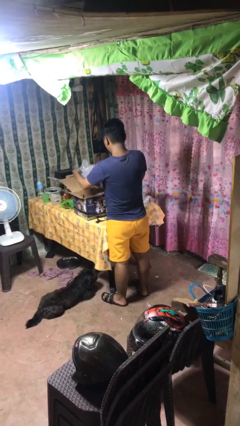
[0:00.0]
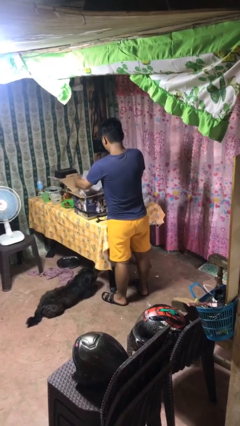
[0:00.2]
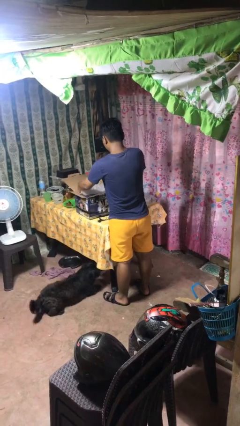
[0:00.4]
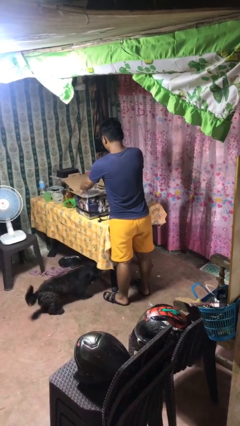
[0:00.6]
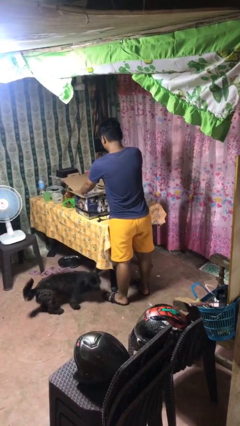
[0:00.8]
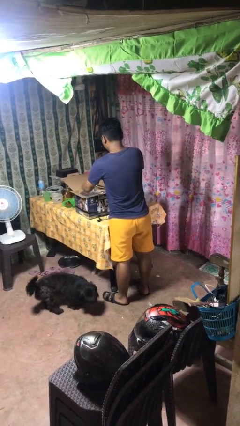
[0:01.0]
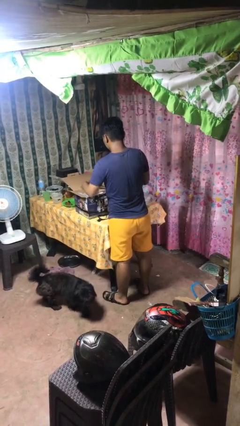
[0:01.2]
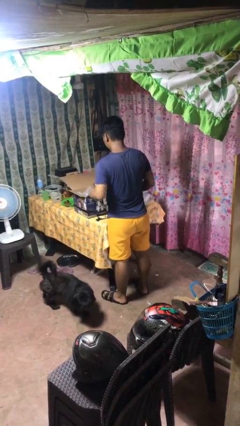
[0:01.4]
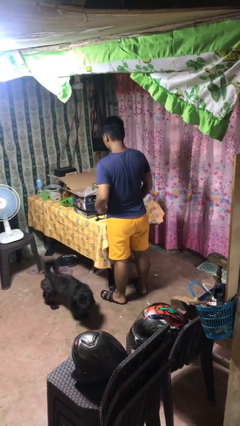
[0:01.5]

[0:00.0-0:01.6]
person puts object into box

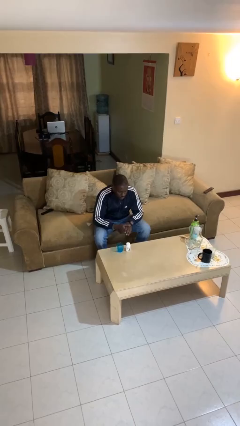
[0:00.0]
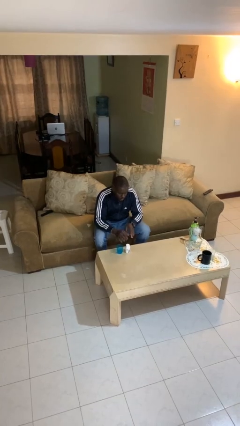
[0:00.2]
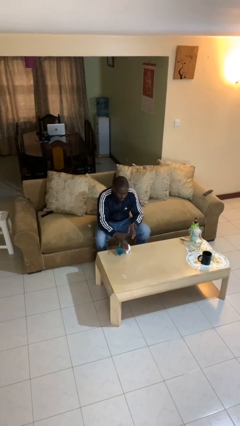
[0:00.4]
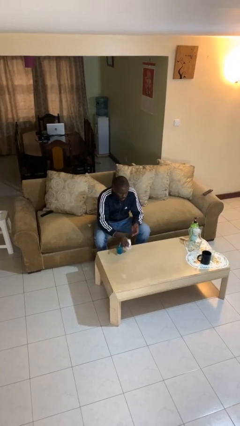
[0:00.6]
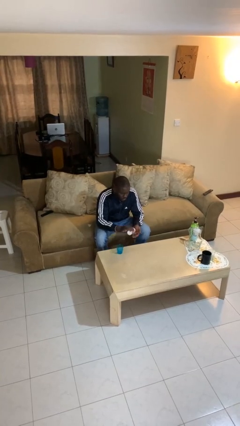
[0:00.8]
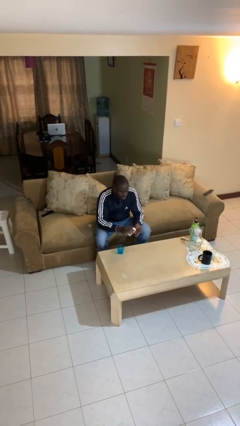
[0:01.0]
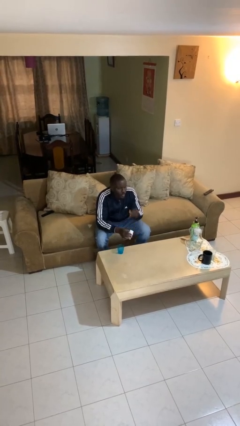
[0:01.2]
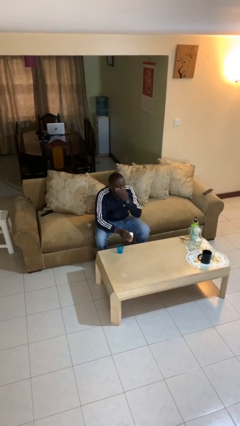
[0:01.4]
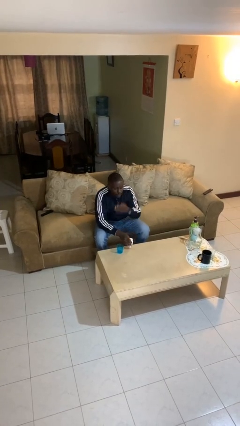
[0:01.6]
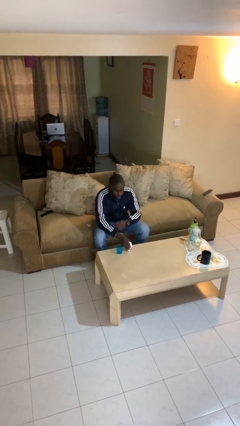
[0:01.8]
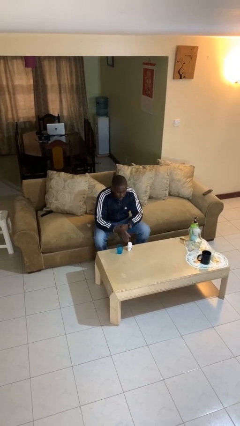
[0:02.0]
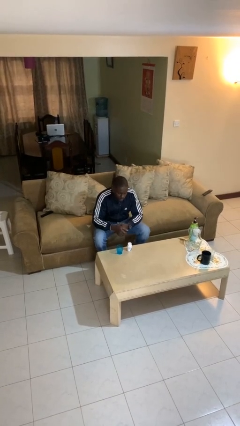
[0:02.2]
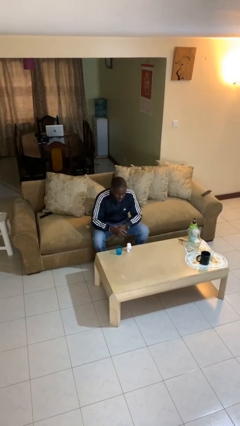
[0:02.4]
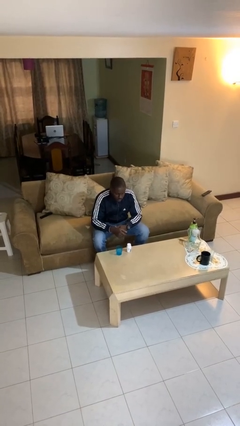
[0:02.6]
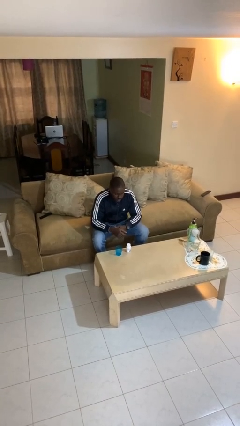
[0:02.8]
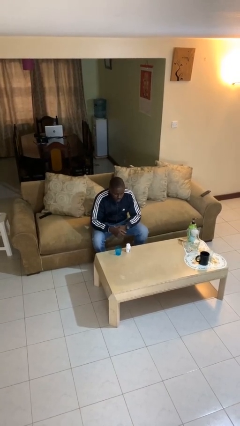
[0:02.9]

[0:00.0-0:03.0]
person takes medicine pills

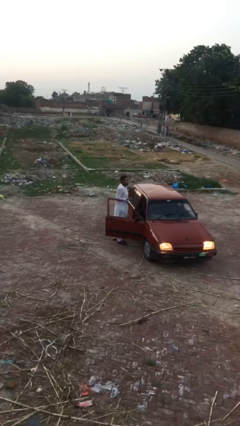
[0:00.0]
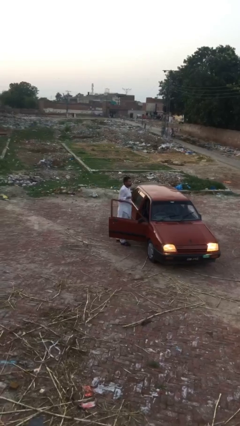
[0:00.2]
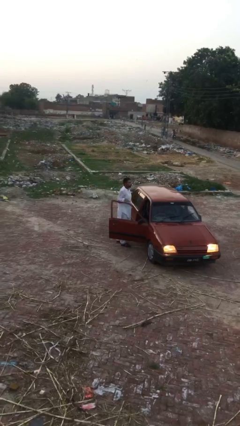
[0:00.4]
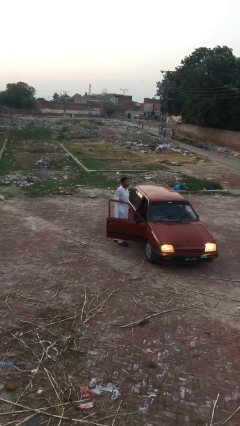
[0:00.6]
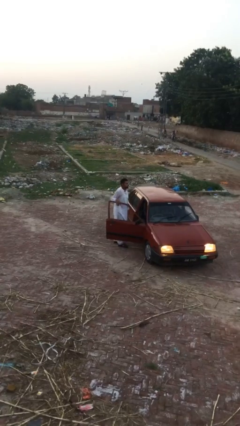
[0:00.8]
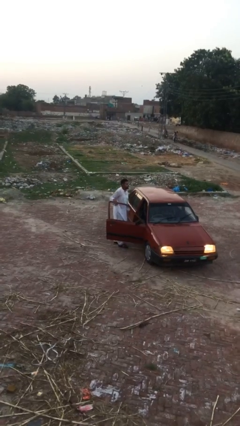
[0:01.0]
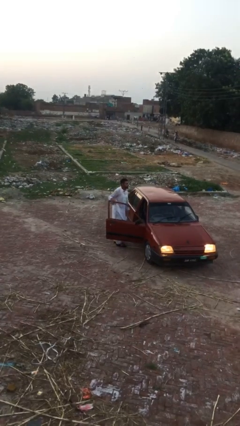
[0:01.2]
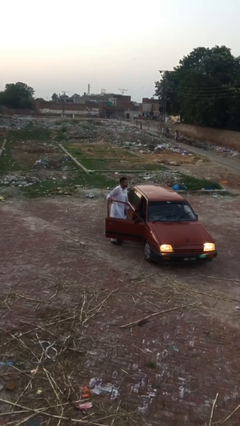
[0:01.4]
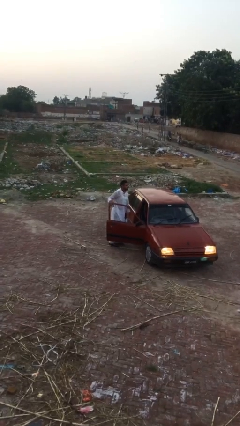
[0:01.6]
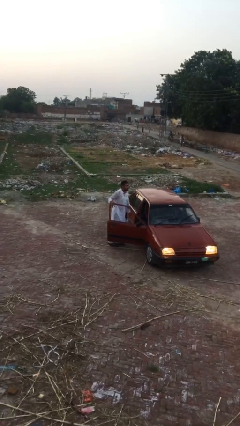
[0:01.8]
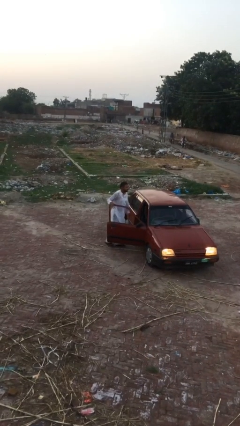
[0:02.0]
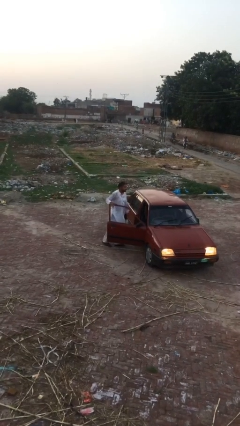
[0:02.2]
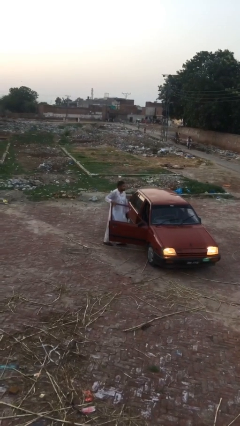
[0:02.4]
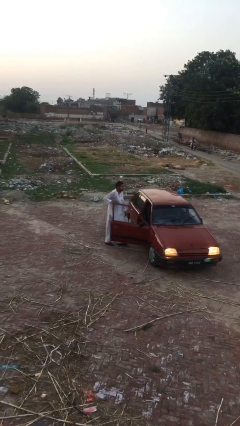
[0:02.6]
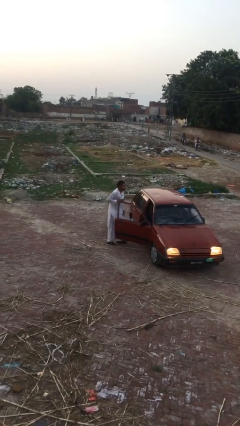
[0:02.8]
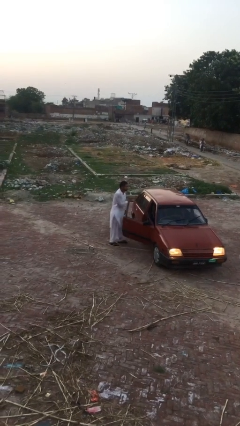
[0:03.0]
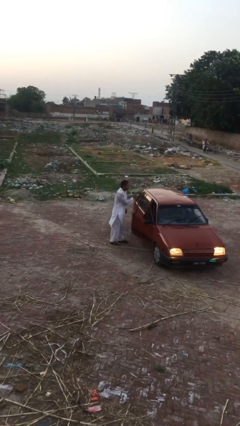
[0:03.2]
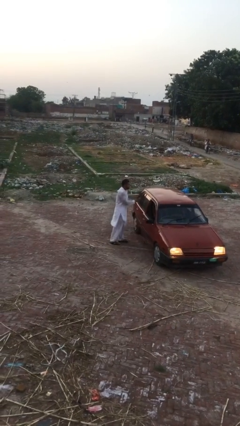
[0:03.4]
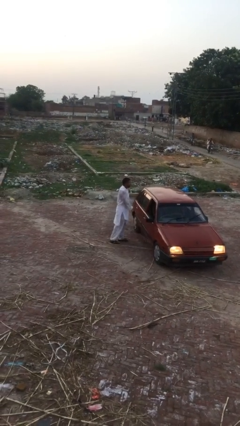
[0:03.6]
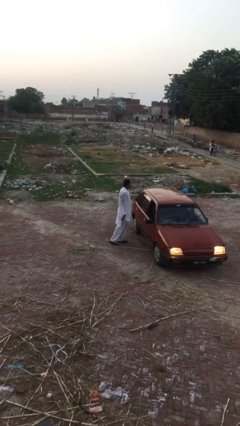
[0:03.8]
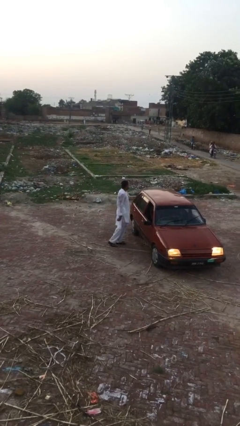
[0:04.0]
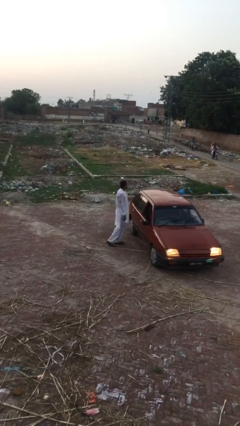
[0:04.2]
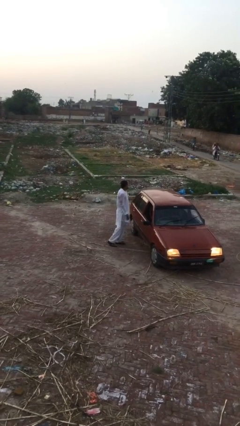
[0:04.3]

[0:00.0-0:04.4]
person closes car door

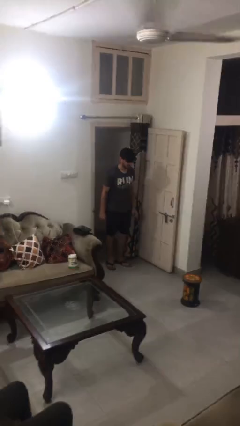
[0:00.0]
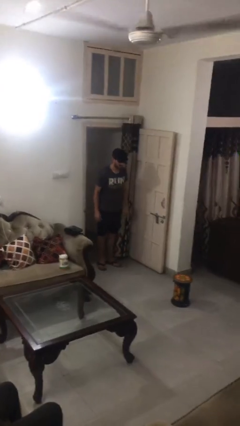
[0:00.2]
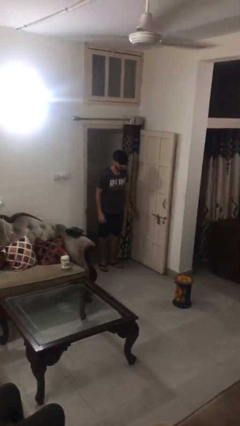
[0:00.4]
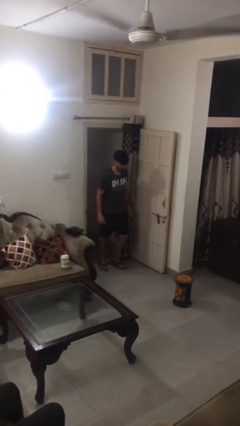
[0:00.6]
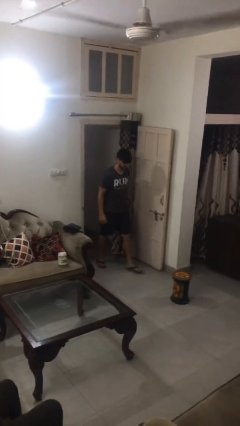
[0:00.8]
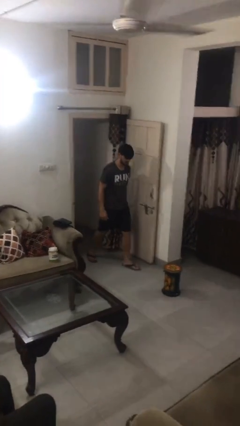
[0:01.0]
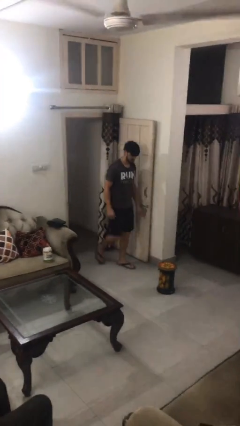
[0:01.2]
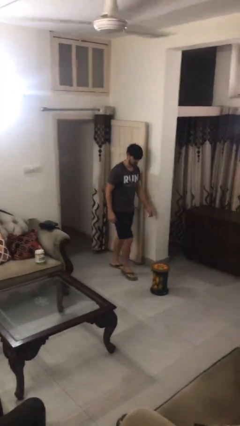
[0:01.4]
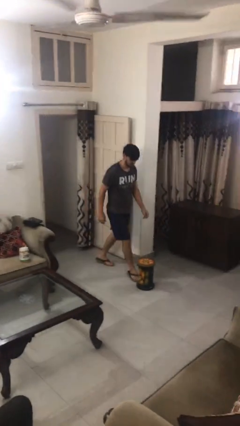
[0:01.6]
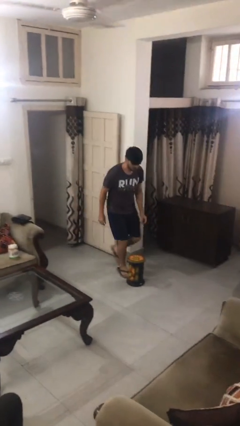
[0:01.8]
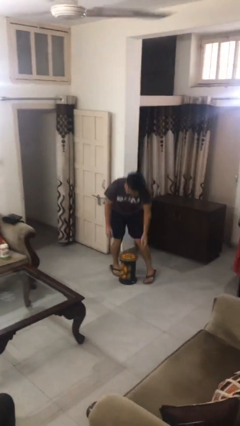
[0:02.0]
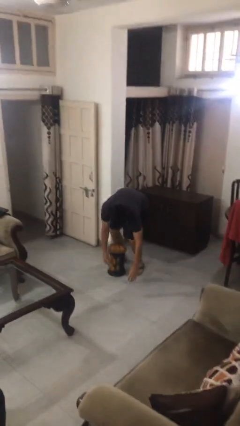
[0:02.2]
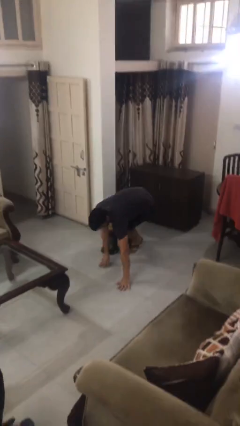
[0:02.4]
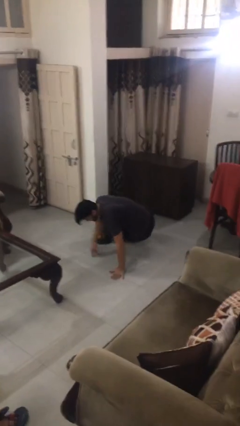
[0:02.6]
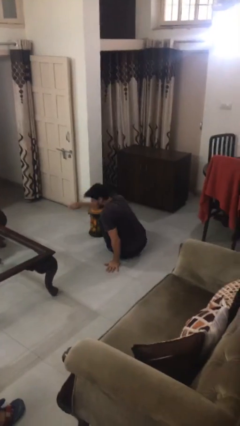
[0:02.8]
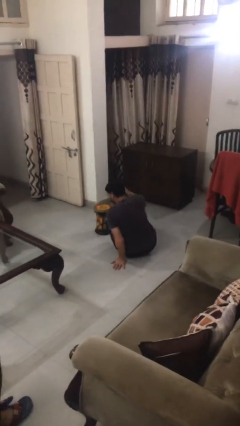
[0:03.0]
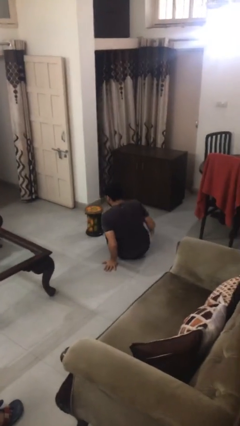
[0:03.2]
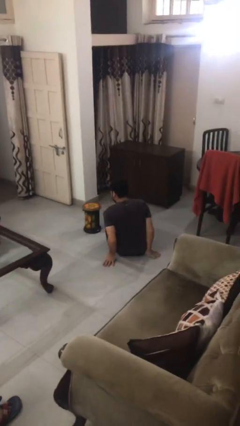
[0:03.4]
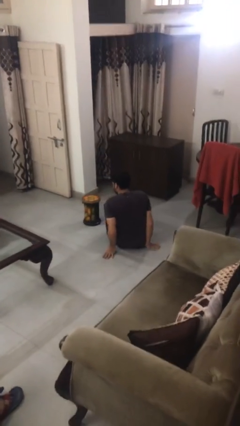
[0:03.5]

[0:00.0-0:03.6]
person trips on object on floor

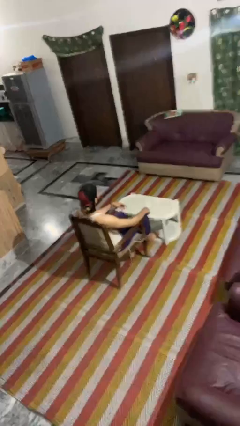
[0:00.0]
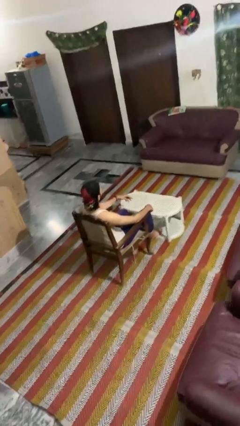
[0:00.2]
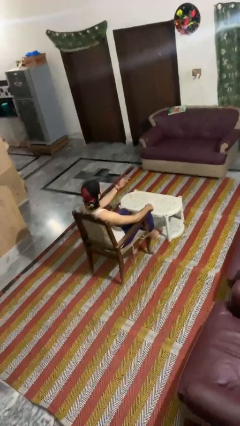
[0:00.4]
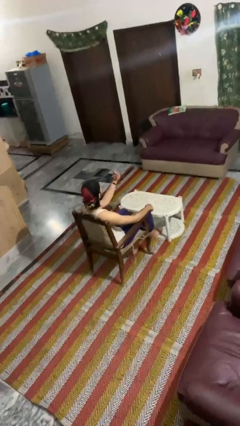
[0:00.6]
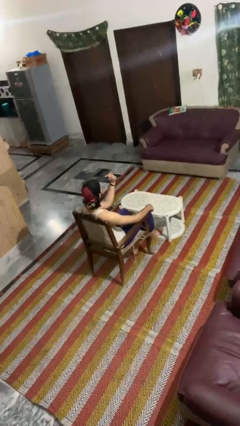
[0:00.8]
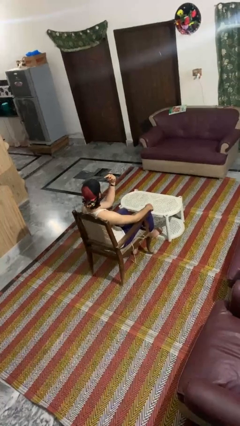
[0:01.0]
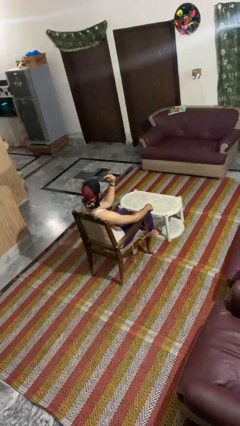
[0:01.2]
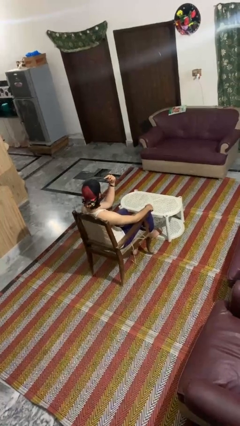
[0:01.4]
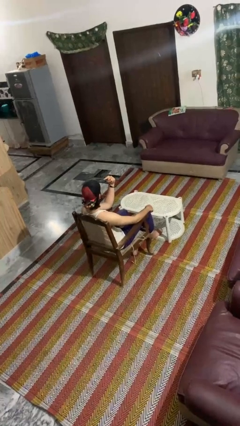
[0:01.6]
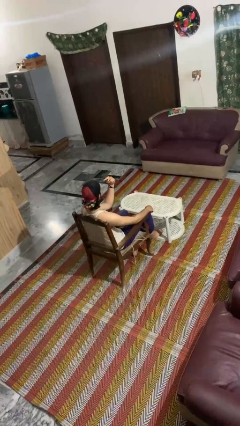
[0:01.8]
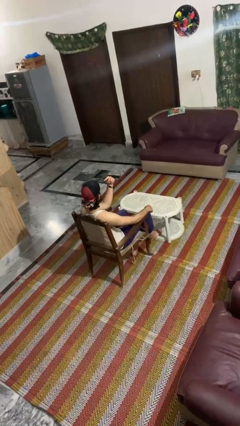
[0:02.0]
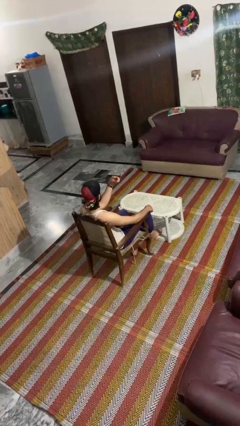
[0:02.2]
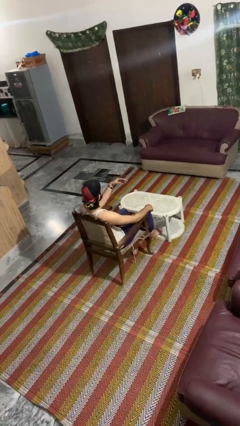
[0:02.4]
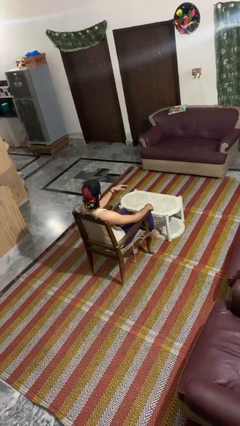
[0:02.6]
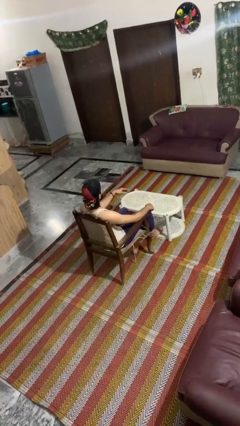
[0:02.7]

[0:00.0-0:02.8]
person gestures watch closely

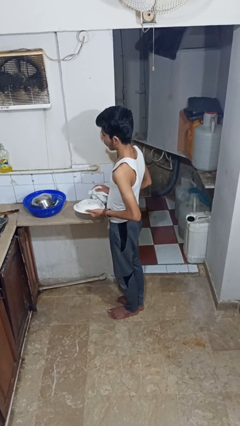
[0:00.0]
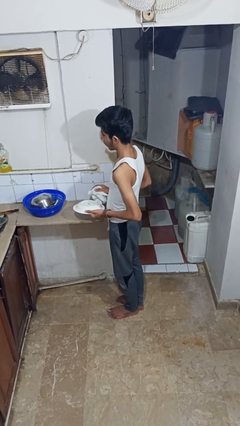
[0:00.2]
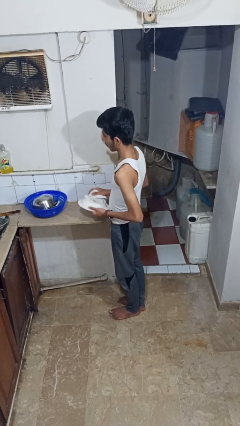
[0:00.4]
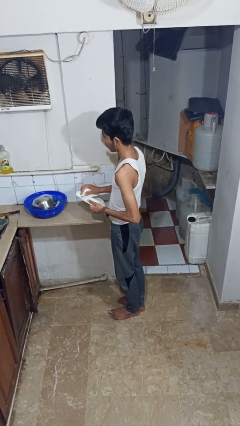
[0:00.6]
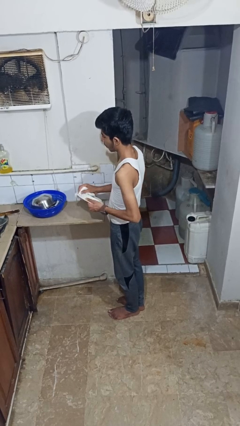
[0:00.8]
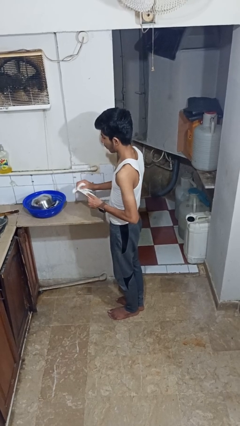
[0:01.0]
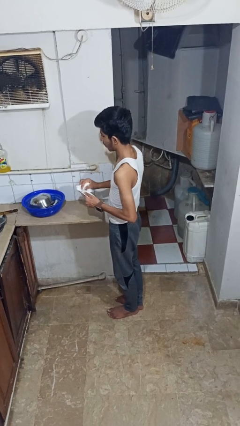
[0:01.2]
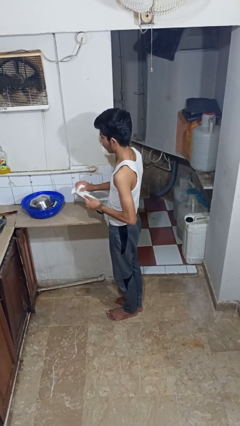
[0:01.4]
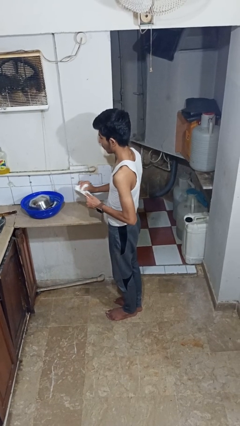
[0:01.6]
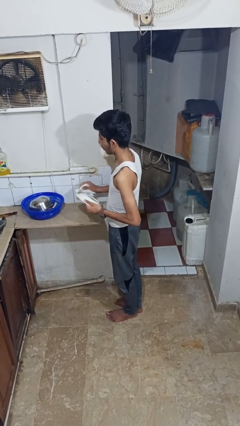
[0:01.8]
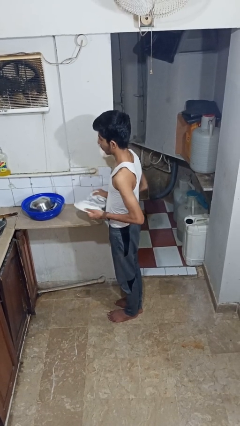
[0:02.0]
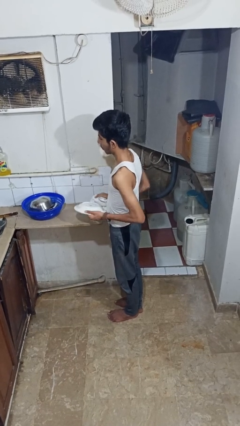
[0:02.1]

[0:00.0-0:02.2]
person dries dish
